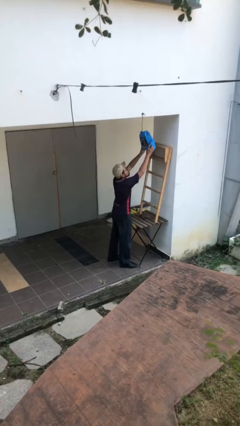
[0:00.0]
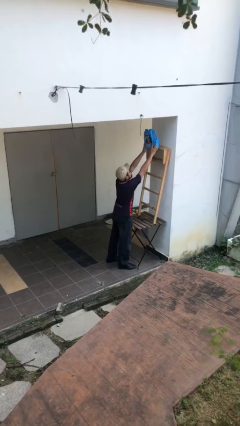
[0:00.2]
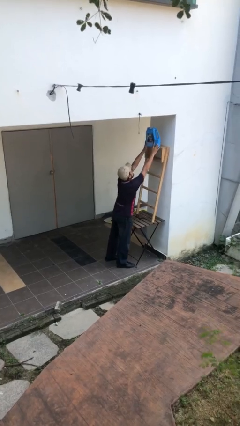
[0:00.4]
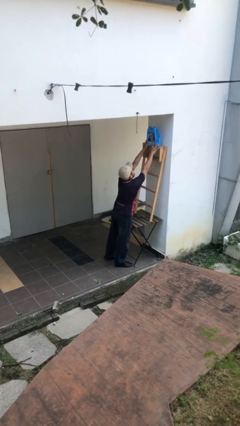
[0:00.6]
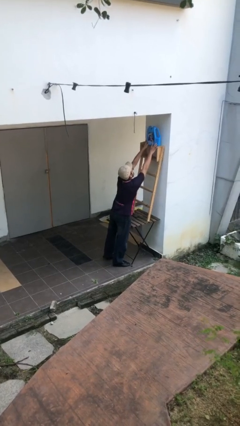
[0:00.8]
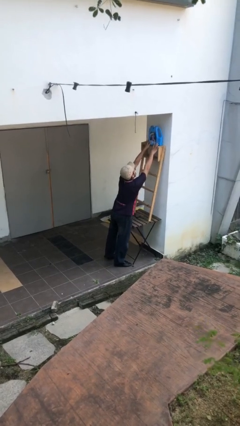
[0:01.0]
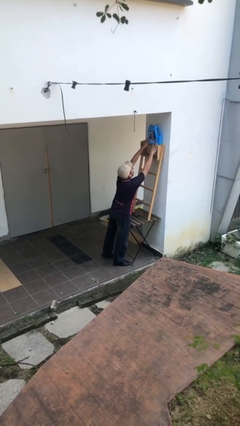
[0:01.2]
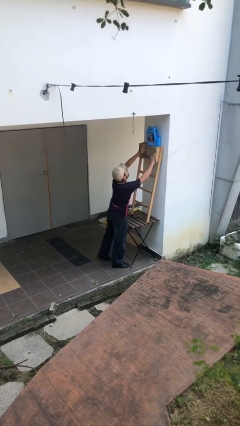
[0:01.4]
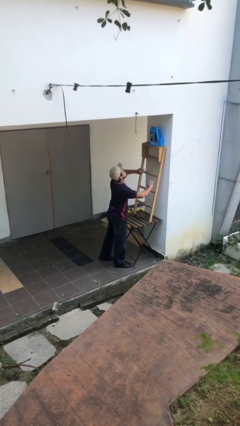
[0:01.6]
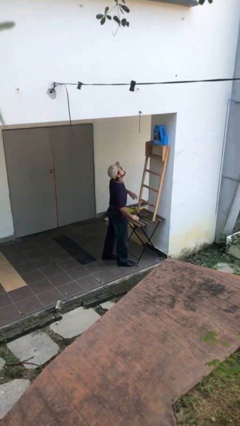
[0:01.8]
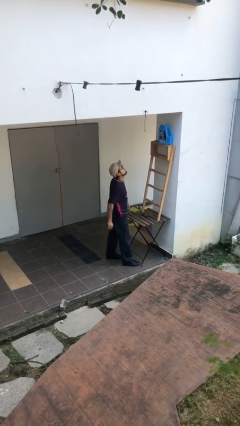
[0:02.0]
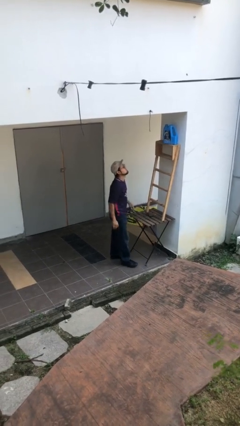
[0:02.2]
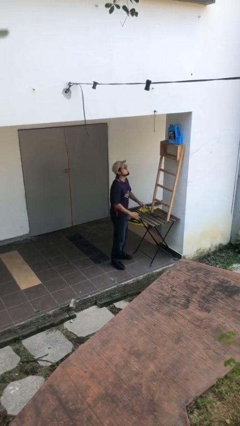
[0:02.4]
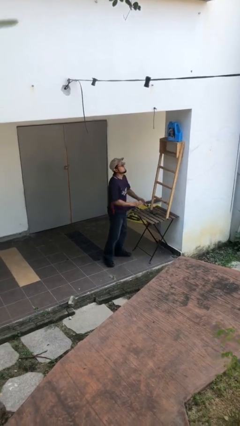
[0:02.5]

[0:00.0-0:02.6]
person puts down object on shelf

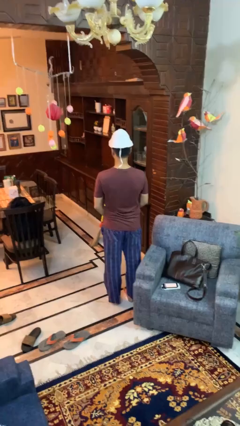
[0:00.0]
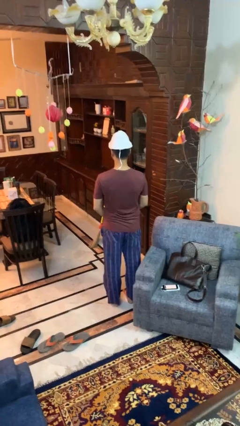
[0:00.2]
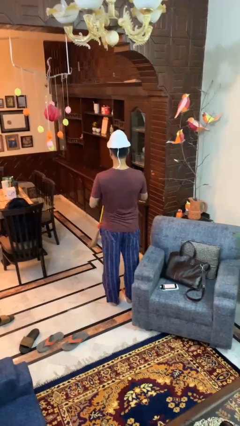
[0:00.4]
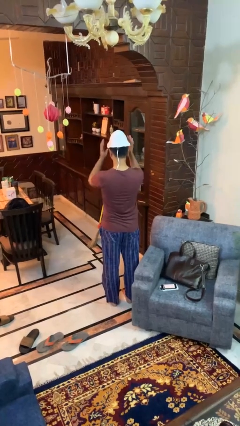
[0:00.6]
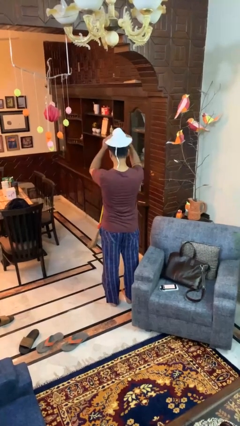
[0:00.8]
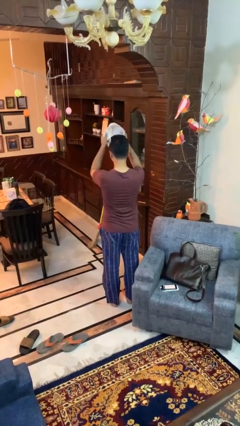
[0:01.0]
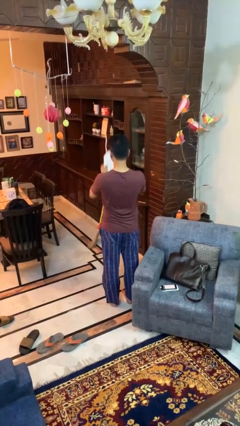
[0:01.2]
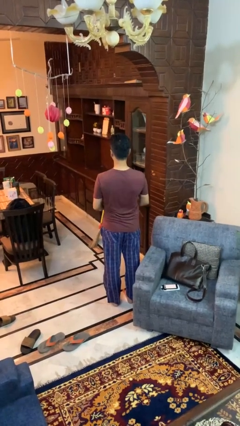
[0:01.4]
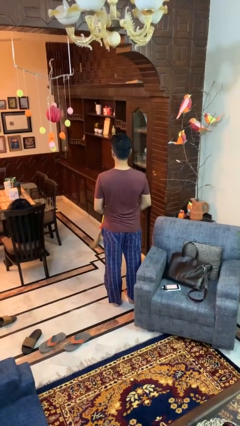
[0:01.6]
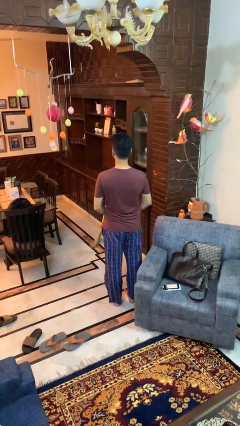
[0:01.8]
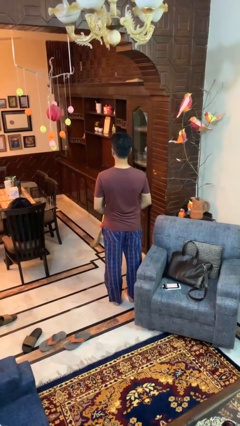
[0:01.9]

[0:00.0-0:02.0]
person takes off hat

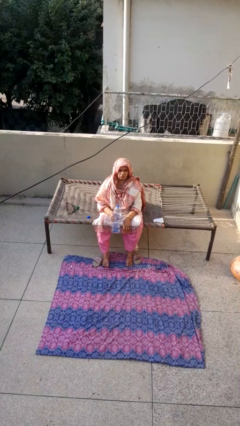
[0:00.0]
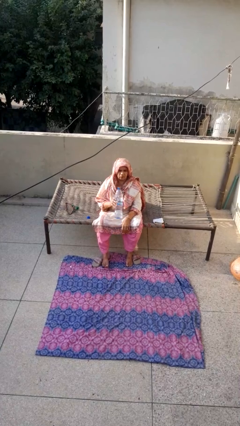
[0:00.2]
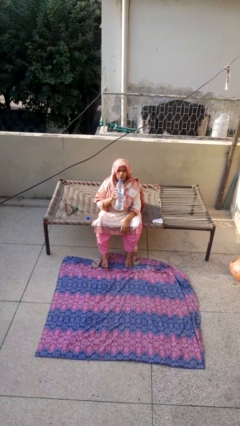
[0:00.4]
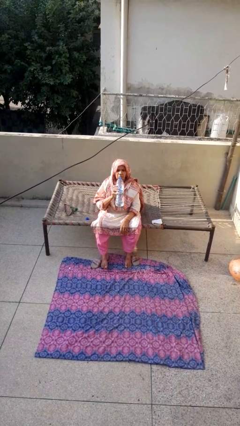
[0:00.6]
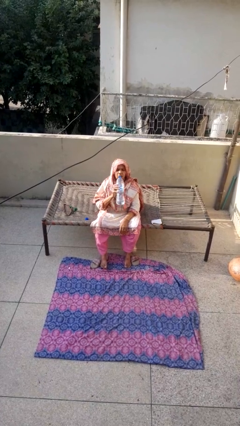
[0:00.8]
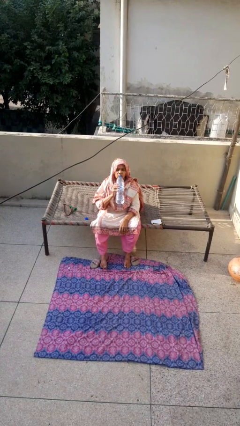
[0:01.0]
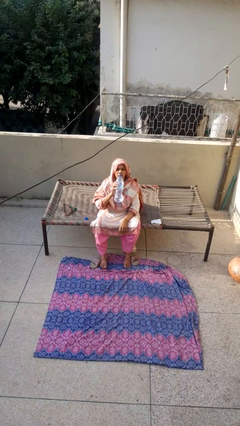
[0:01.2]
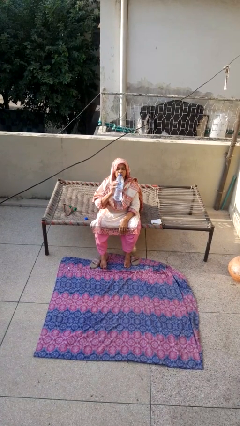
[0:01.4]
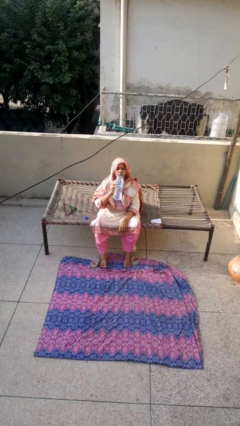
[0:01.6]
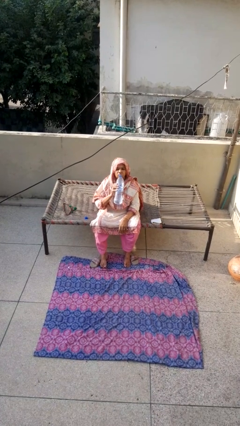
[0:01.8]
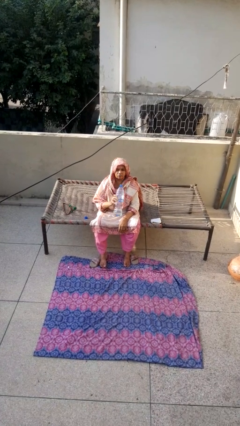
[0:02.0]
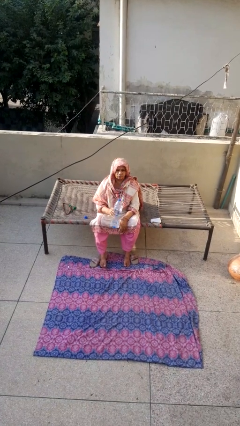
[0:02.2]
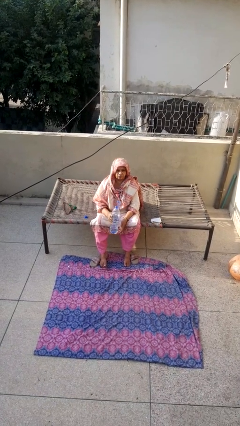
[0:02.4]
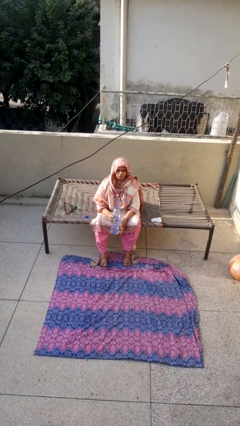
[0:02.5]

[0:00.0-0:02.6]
person drinks from bottle

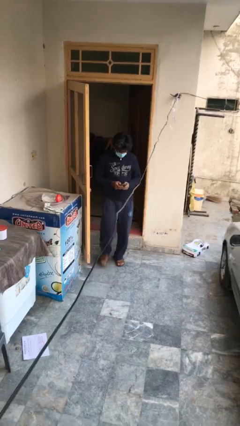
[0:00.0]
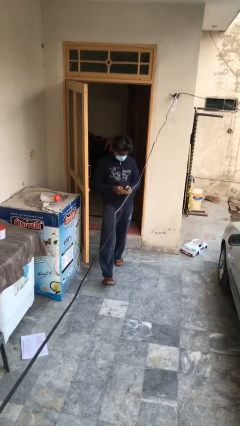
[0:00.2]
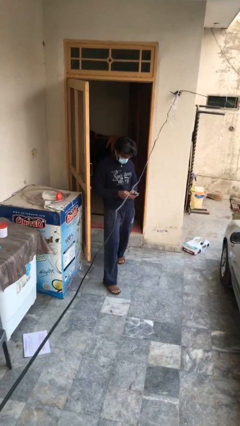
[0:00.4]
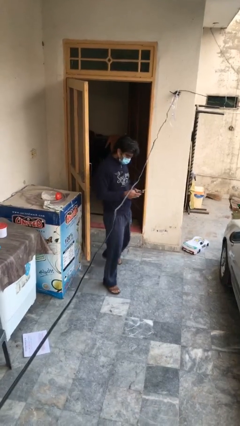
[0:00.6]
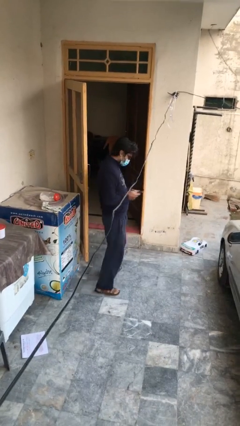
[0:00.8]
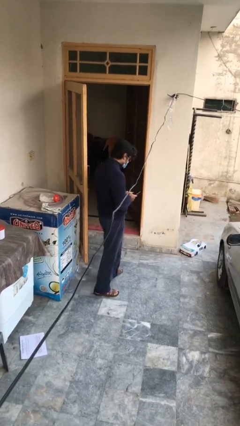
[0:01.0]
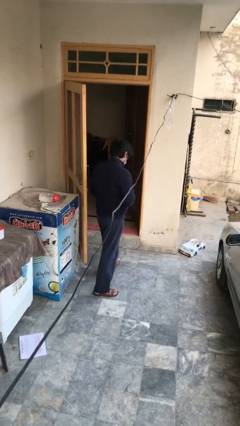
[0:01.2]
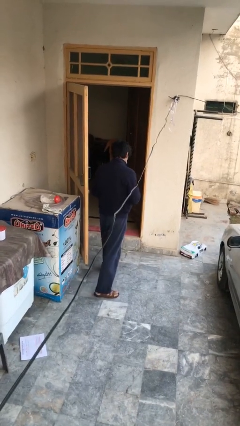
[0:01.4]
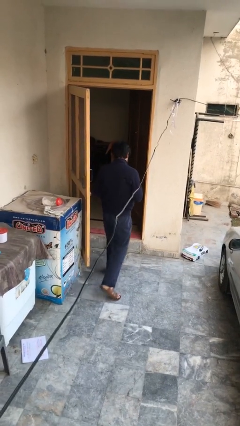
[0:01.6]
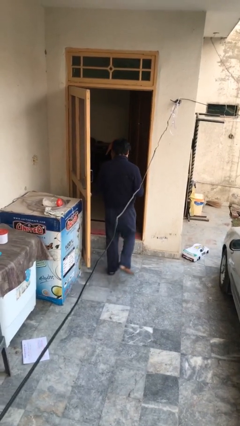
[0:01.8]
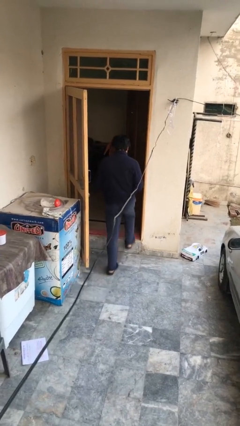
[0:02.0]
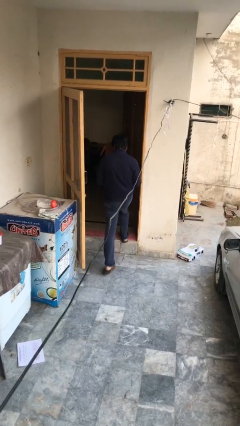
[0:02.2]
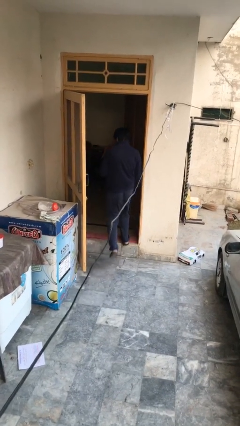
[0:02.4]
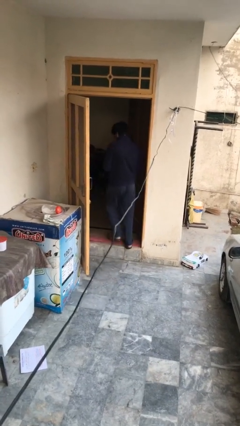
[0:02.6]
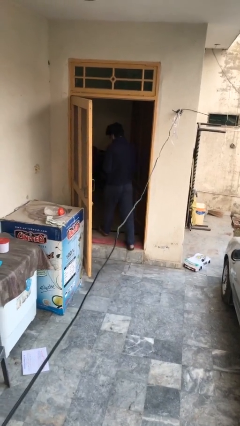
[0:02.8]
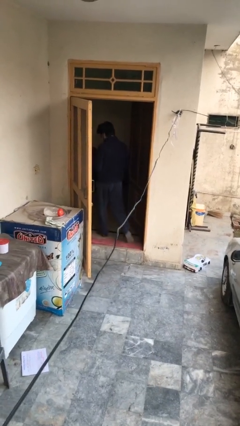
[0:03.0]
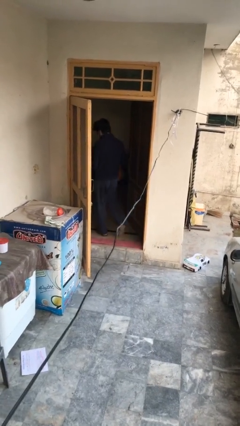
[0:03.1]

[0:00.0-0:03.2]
person exits scene through structure

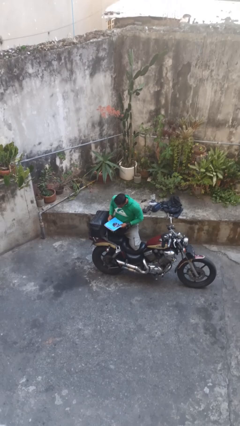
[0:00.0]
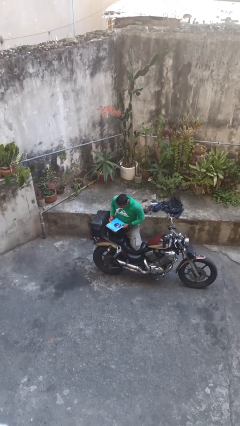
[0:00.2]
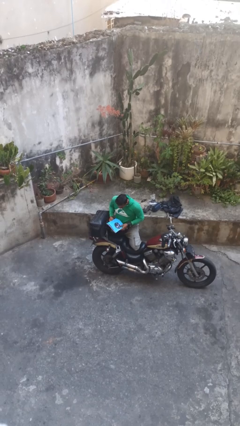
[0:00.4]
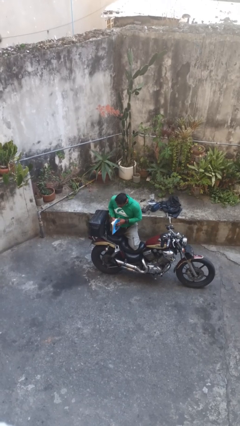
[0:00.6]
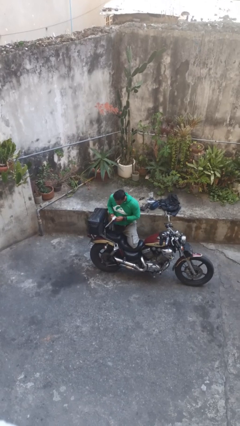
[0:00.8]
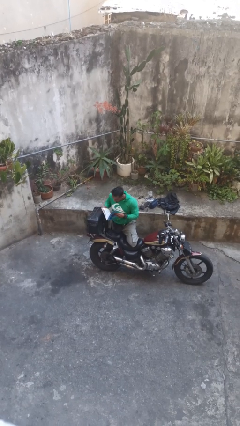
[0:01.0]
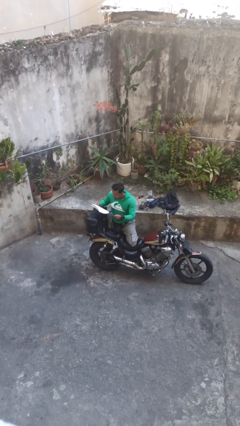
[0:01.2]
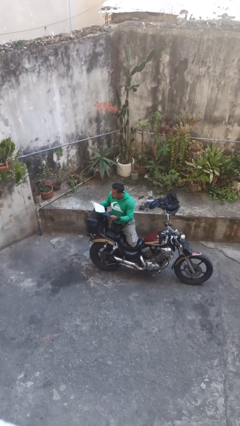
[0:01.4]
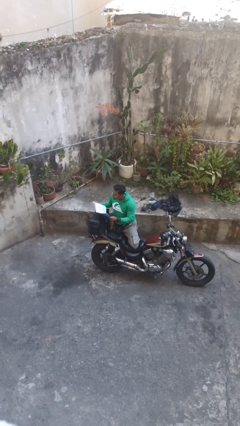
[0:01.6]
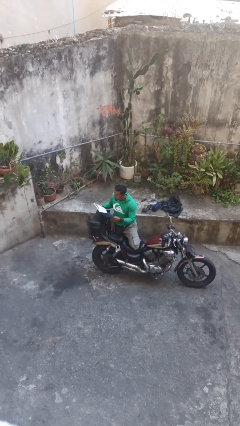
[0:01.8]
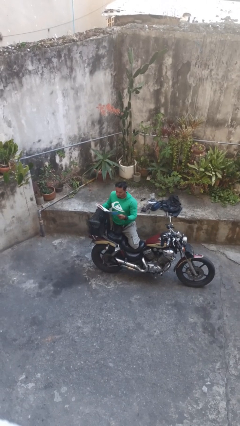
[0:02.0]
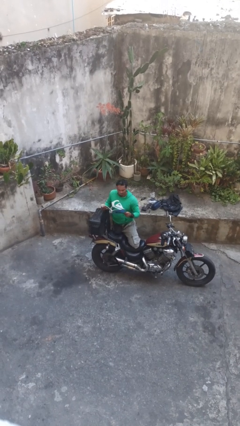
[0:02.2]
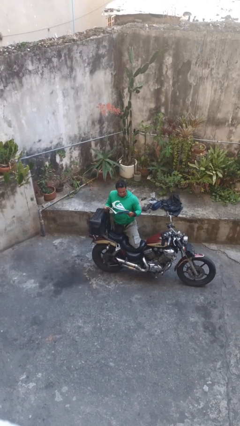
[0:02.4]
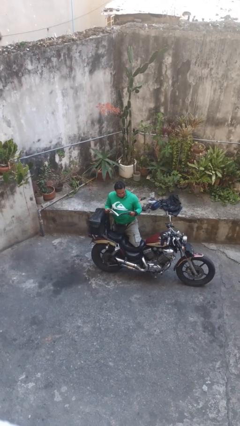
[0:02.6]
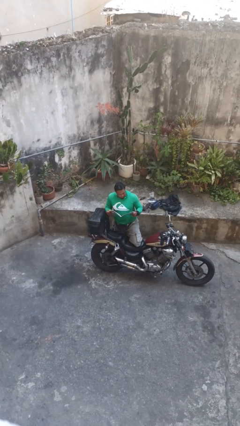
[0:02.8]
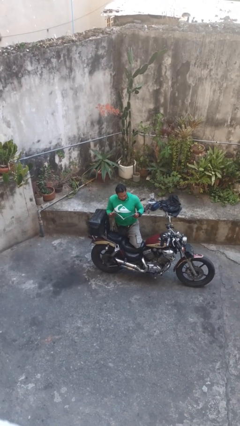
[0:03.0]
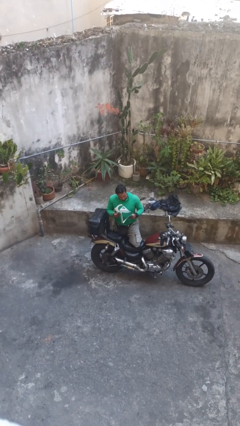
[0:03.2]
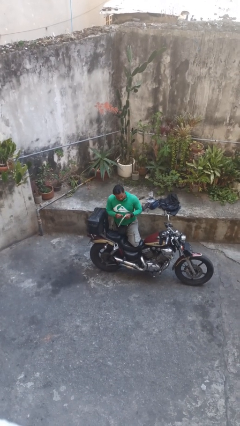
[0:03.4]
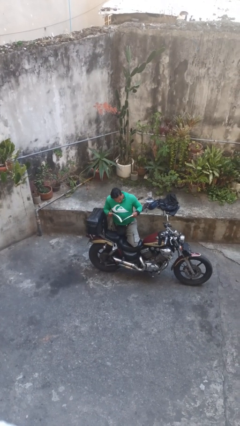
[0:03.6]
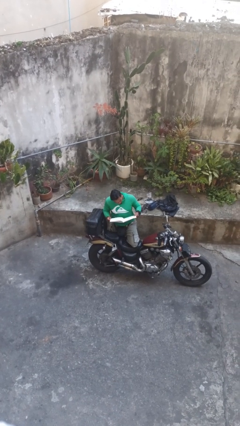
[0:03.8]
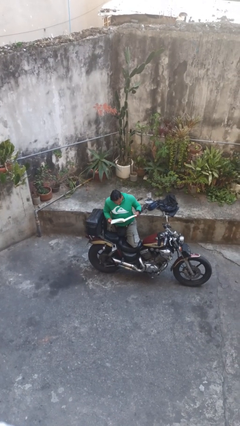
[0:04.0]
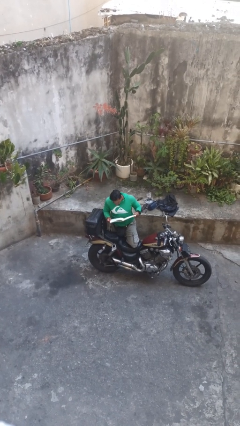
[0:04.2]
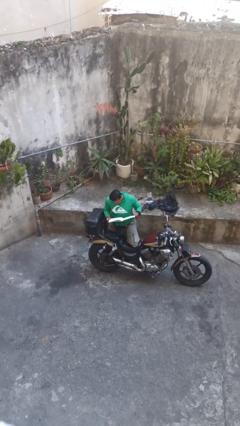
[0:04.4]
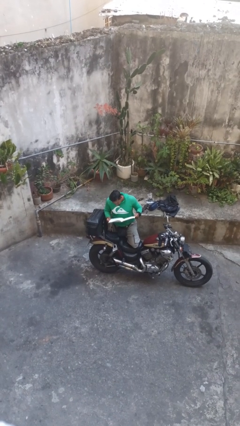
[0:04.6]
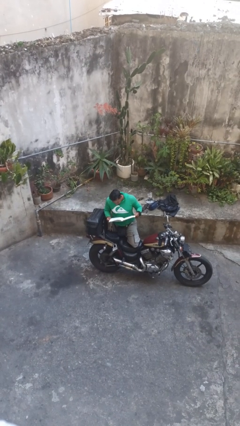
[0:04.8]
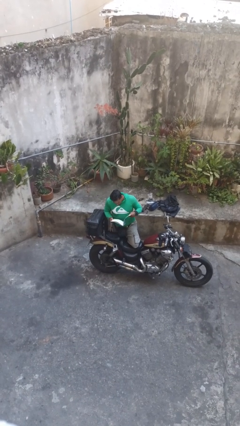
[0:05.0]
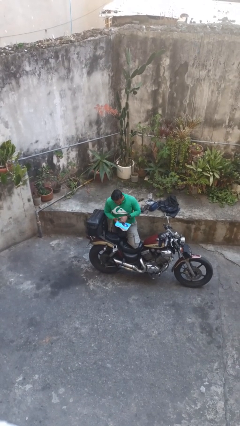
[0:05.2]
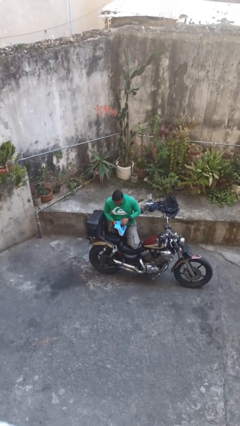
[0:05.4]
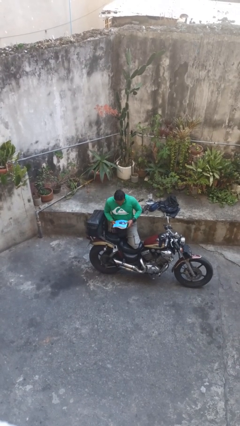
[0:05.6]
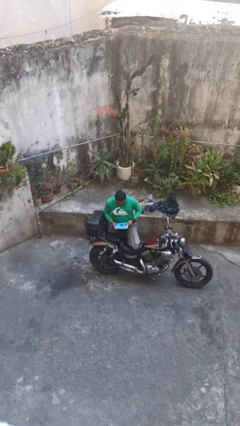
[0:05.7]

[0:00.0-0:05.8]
person reads document

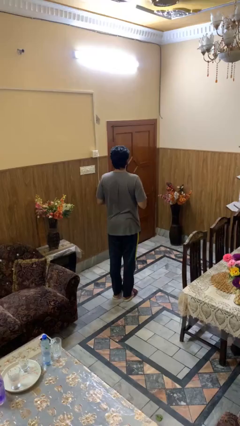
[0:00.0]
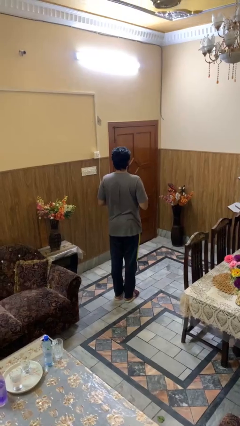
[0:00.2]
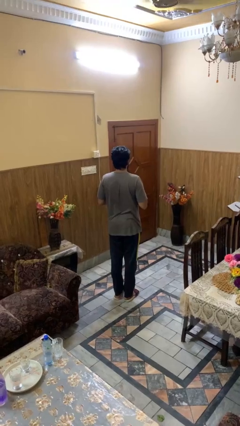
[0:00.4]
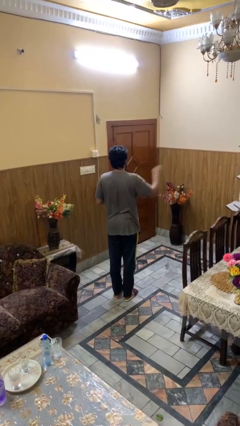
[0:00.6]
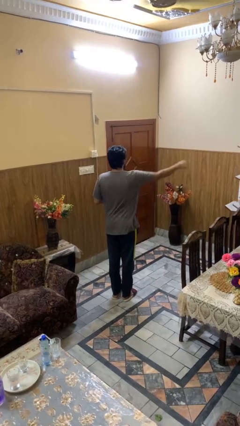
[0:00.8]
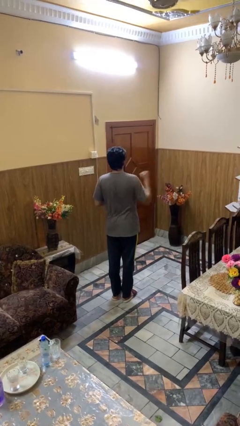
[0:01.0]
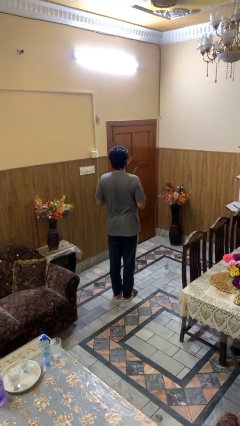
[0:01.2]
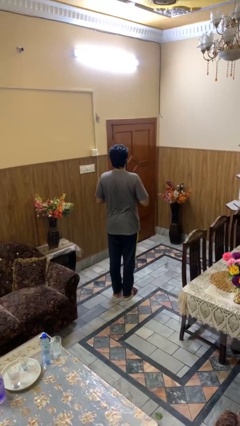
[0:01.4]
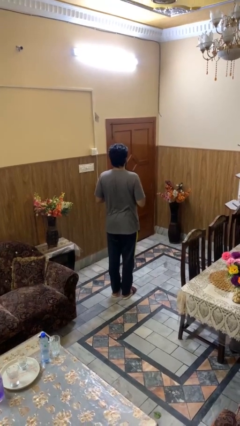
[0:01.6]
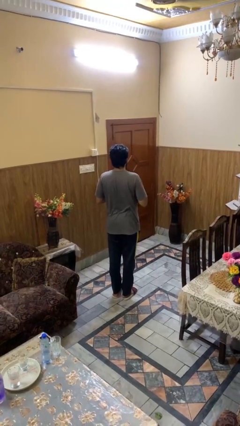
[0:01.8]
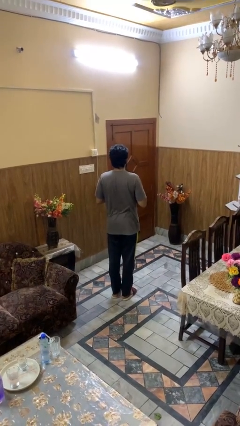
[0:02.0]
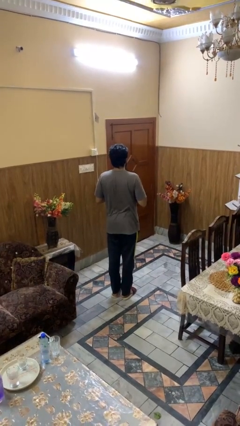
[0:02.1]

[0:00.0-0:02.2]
person punches
